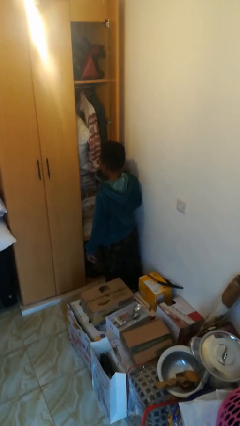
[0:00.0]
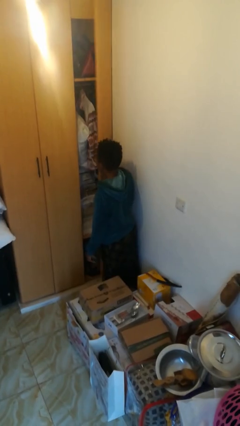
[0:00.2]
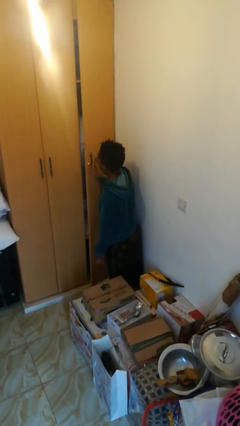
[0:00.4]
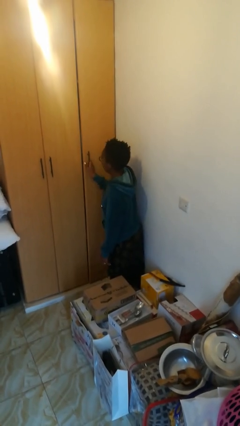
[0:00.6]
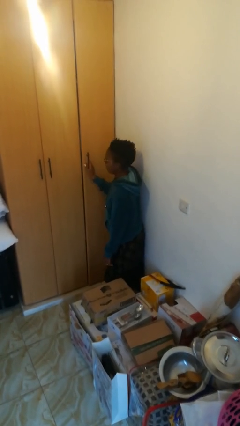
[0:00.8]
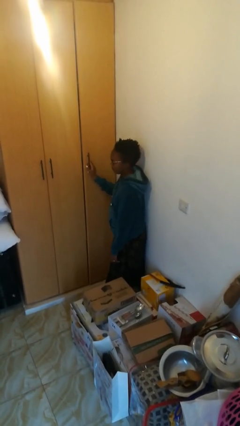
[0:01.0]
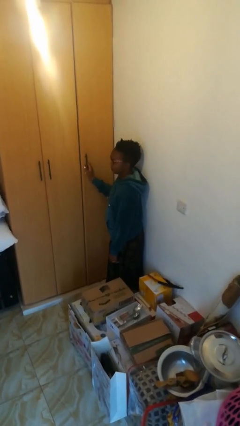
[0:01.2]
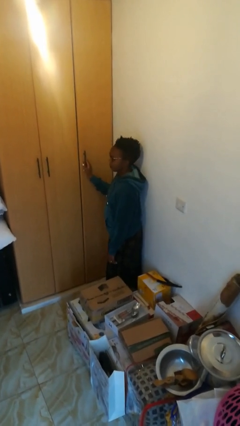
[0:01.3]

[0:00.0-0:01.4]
person closes closet door

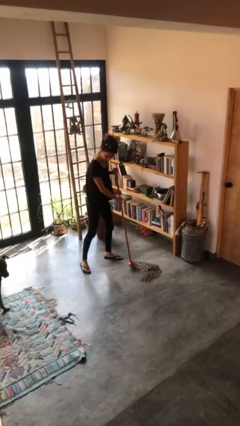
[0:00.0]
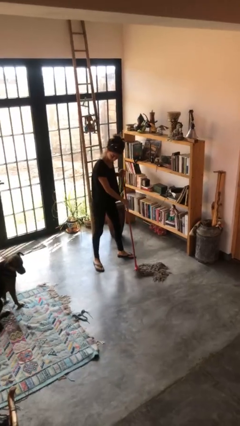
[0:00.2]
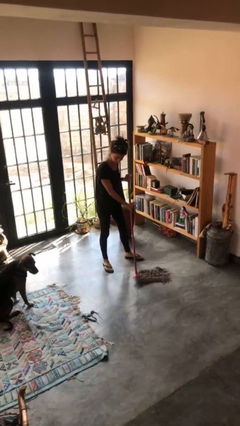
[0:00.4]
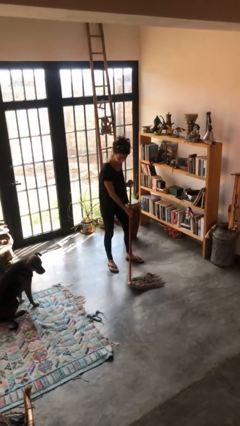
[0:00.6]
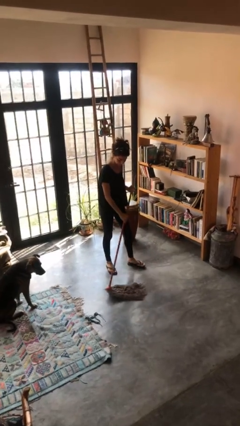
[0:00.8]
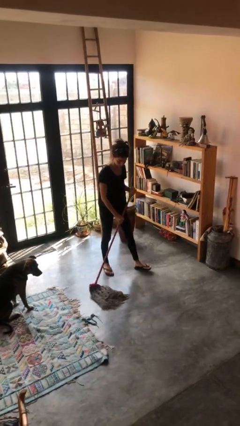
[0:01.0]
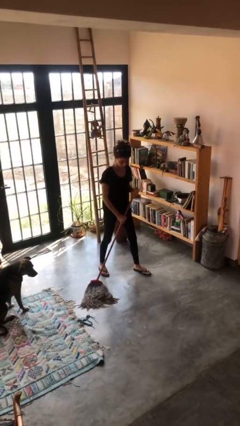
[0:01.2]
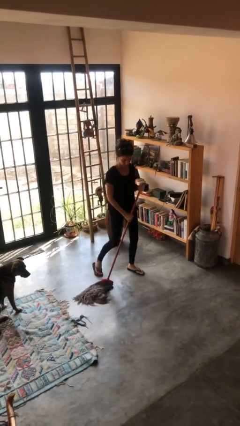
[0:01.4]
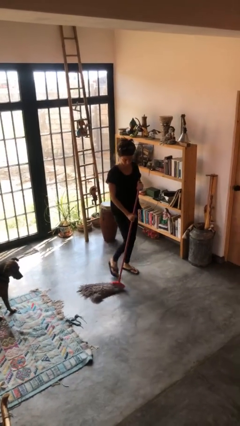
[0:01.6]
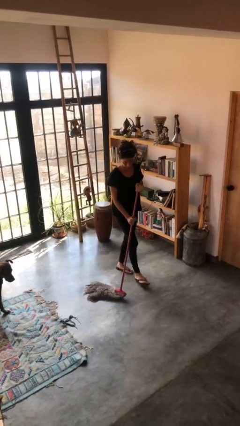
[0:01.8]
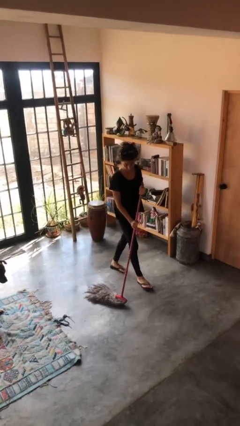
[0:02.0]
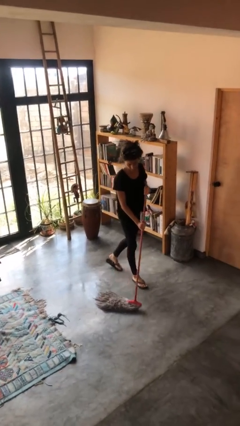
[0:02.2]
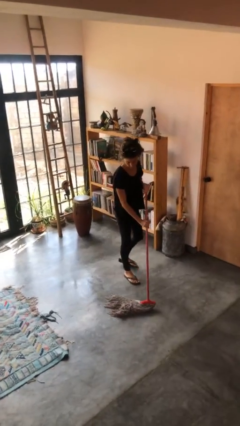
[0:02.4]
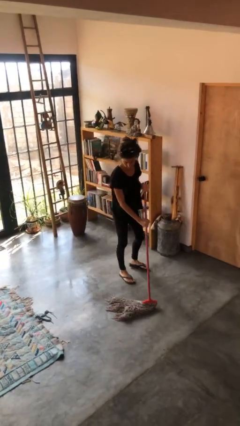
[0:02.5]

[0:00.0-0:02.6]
person mops

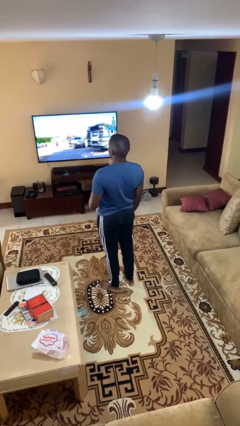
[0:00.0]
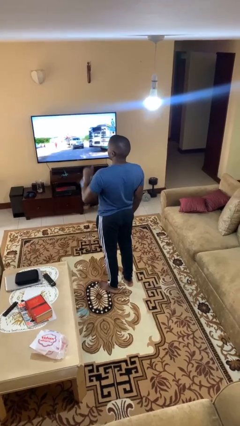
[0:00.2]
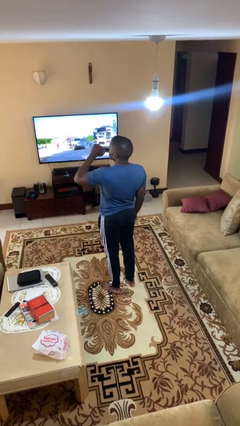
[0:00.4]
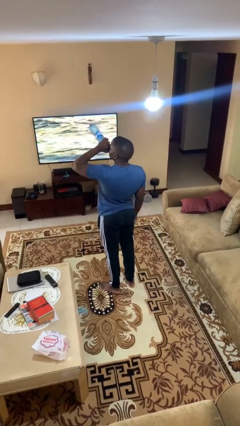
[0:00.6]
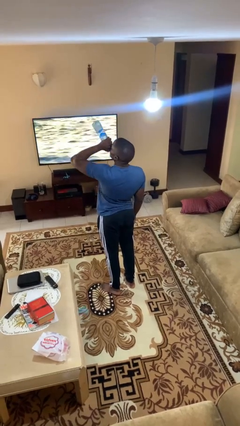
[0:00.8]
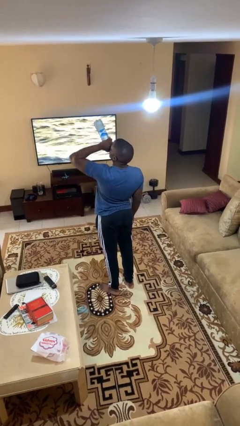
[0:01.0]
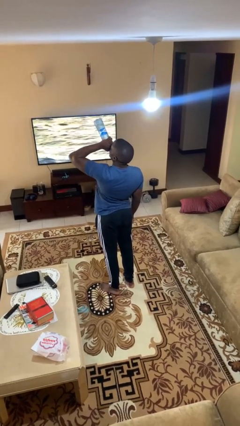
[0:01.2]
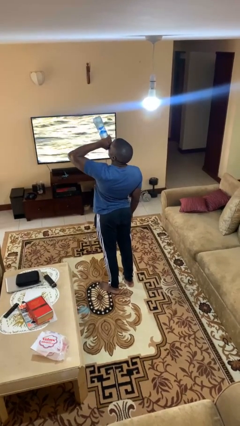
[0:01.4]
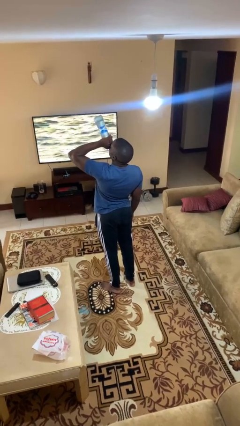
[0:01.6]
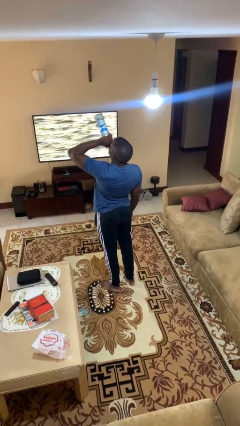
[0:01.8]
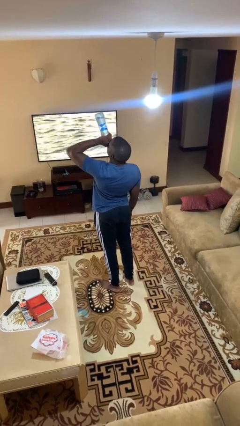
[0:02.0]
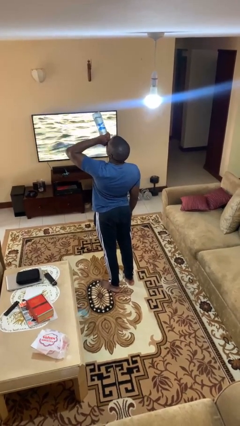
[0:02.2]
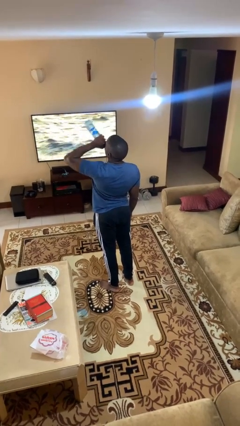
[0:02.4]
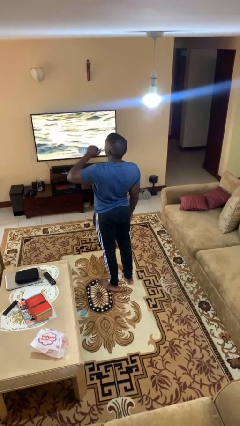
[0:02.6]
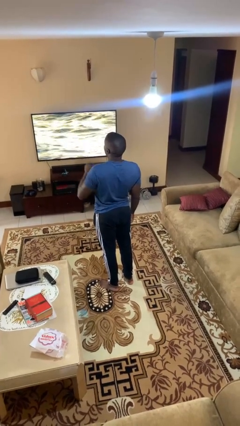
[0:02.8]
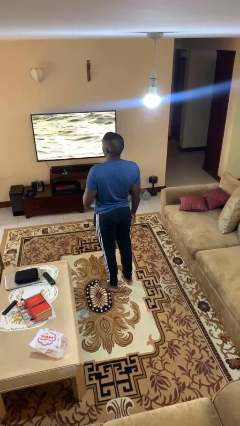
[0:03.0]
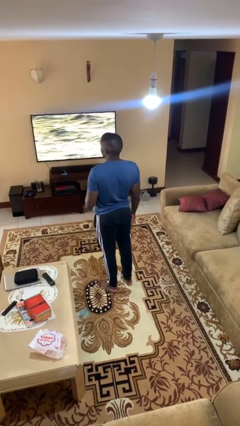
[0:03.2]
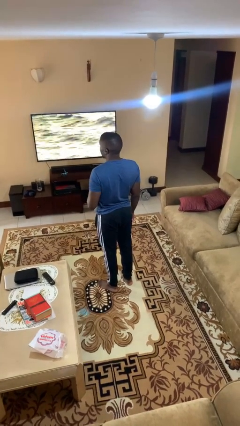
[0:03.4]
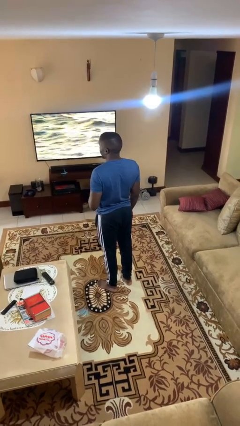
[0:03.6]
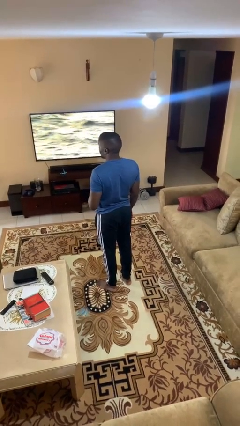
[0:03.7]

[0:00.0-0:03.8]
person drinks from bottle

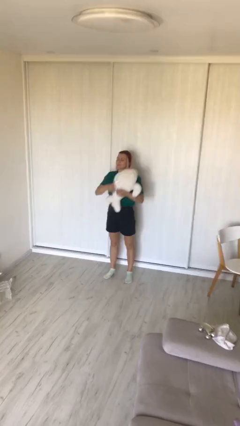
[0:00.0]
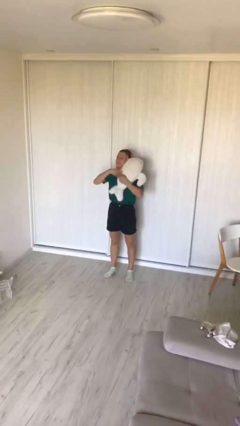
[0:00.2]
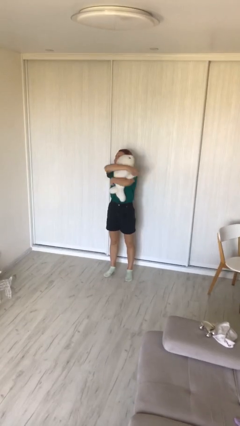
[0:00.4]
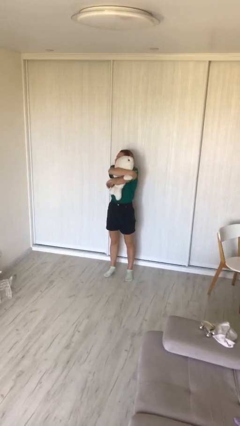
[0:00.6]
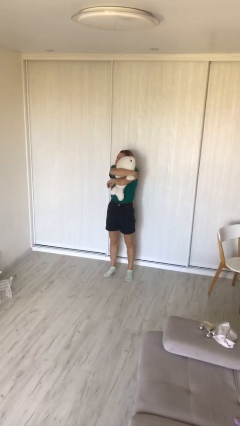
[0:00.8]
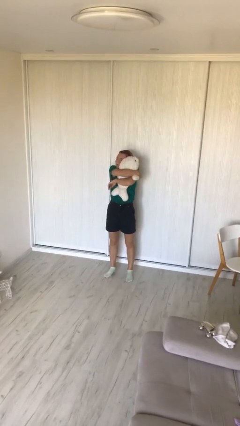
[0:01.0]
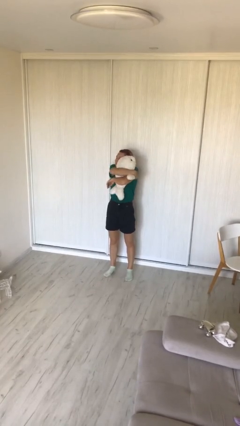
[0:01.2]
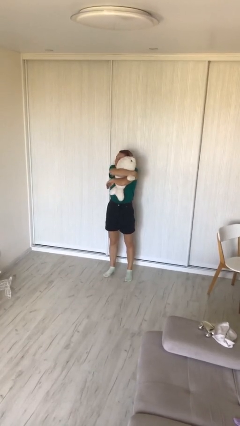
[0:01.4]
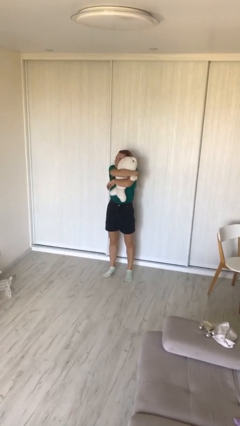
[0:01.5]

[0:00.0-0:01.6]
person hugs stuffed animal

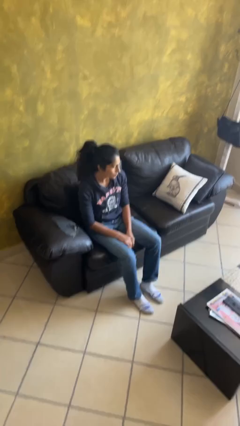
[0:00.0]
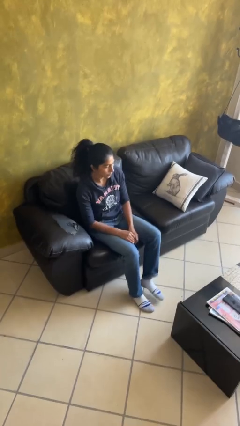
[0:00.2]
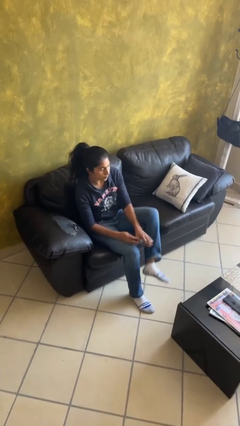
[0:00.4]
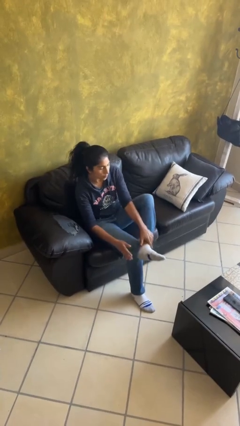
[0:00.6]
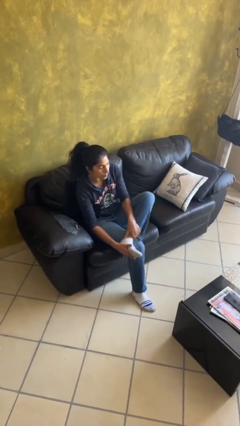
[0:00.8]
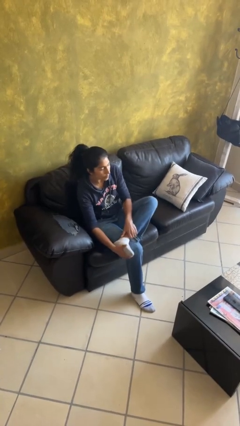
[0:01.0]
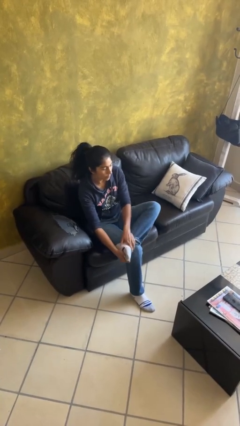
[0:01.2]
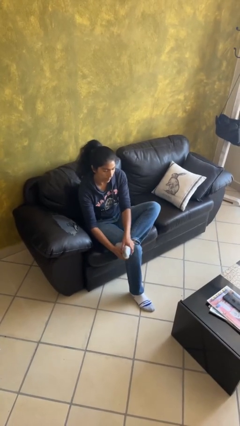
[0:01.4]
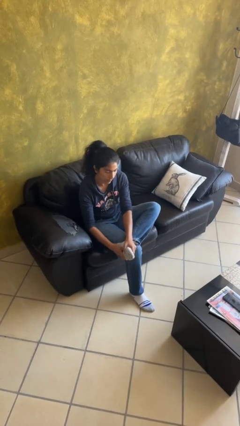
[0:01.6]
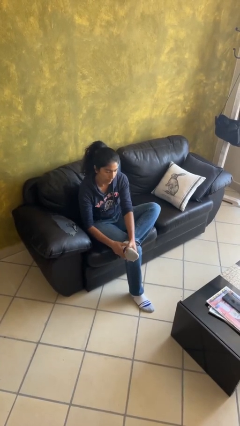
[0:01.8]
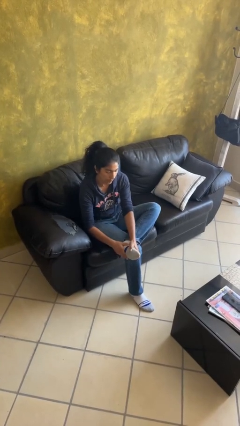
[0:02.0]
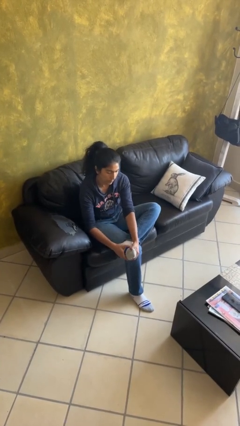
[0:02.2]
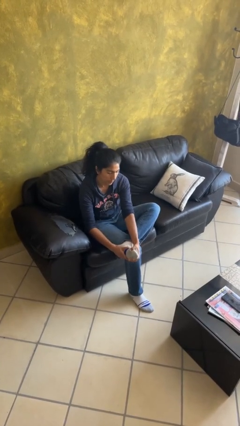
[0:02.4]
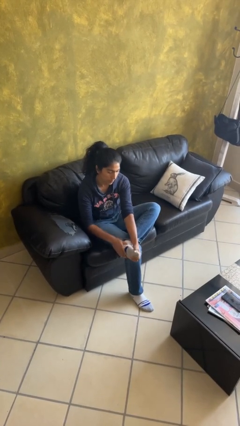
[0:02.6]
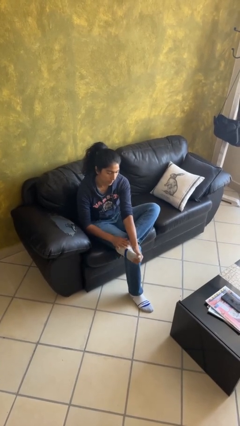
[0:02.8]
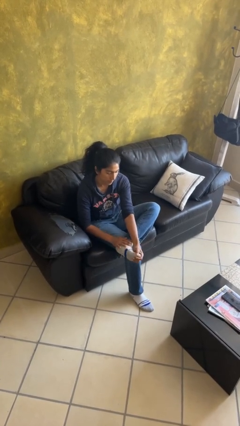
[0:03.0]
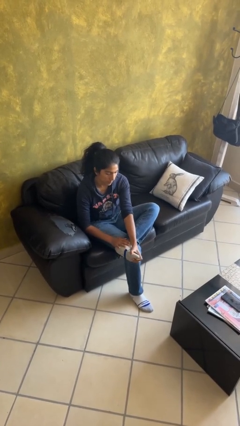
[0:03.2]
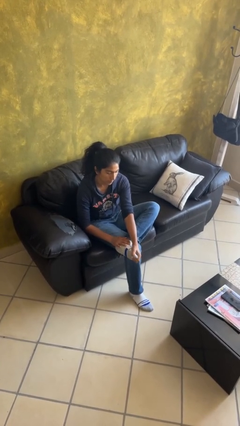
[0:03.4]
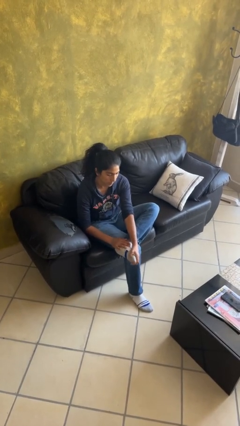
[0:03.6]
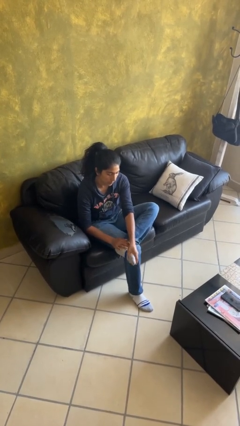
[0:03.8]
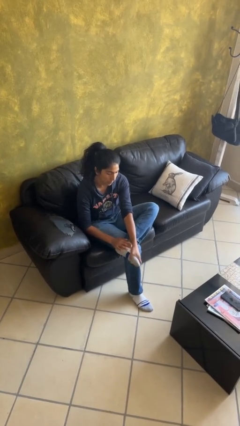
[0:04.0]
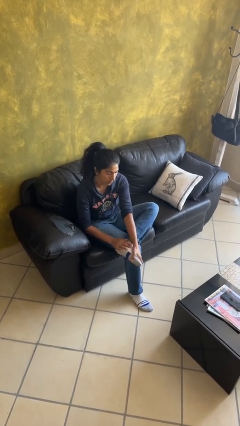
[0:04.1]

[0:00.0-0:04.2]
person rubs foot

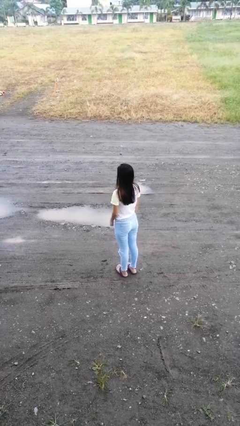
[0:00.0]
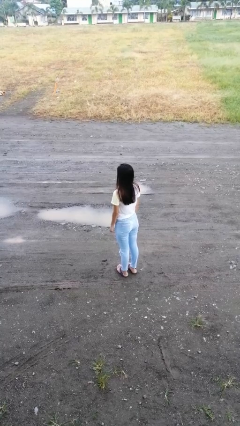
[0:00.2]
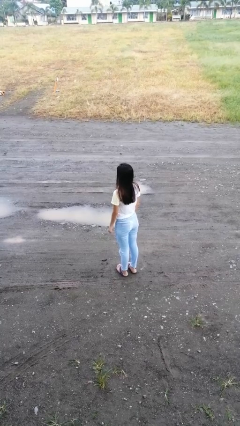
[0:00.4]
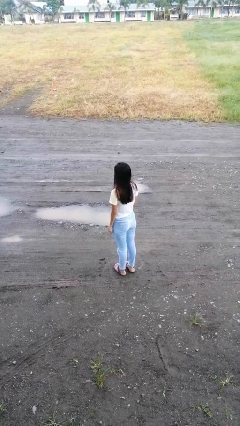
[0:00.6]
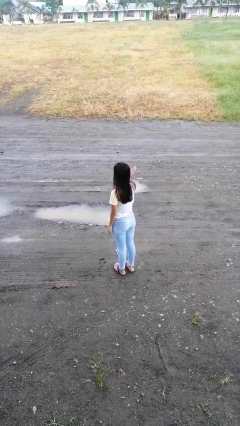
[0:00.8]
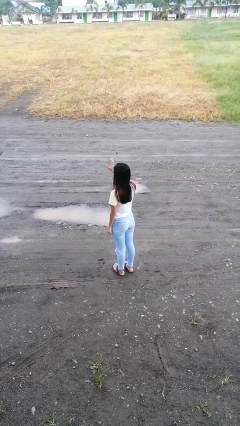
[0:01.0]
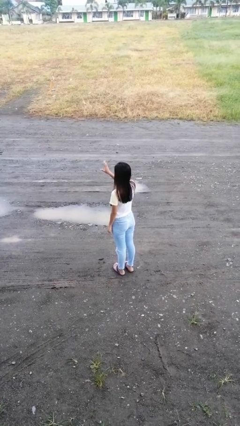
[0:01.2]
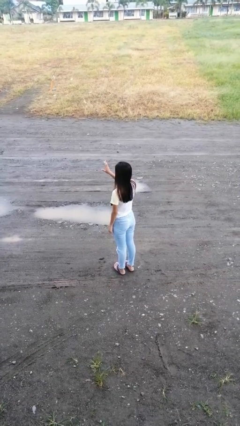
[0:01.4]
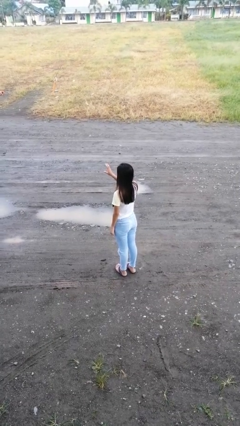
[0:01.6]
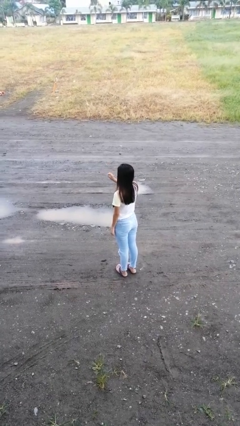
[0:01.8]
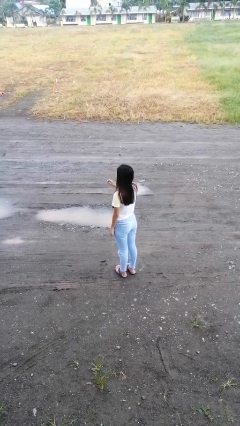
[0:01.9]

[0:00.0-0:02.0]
person gestures swipe right

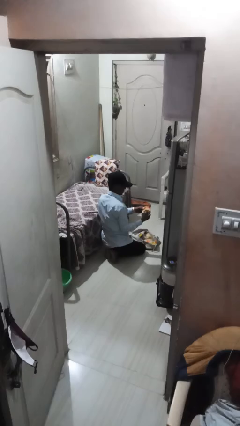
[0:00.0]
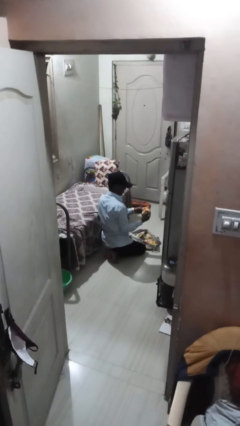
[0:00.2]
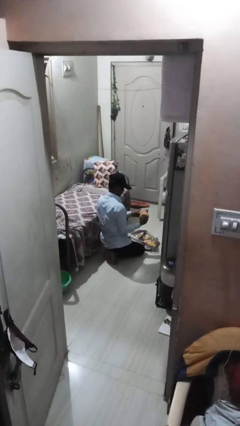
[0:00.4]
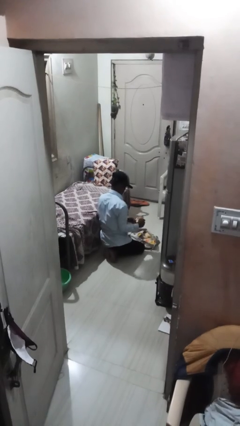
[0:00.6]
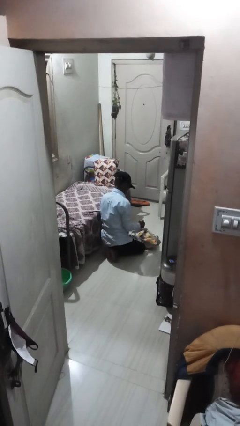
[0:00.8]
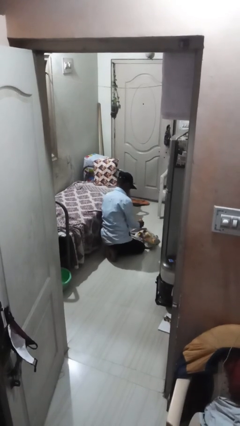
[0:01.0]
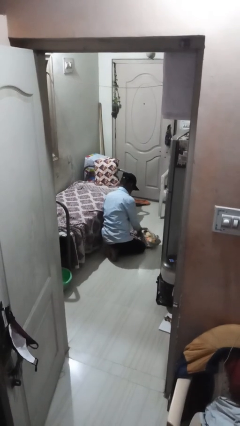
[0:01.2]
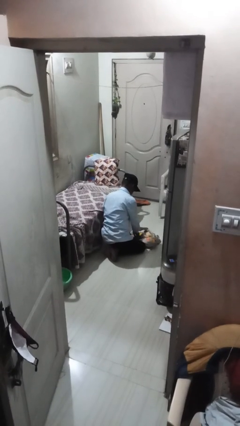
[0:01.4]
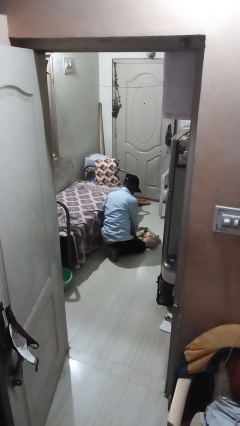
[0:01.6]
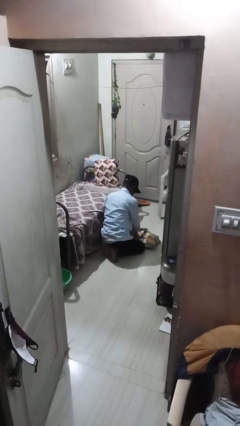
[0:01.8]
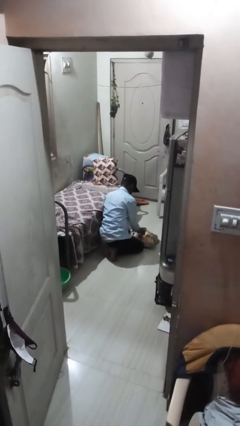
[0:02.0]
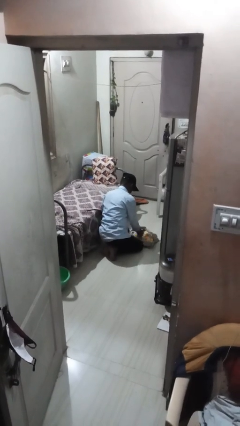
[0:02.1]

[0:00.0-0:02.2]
person puts object into bag
